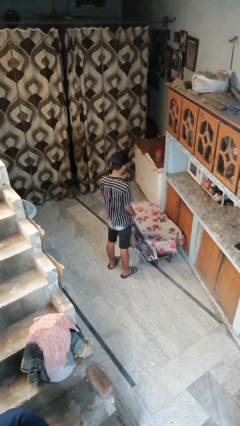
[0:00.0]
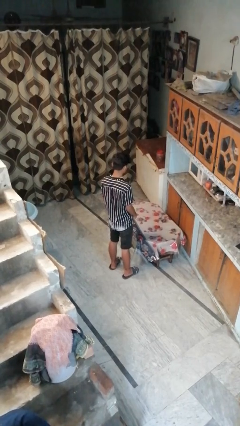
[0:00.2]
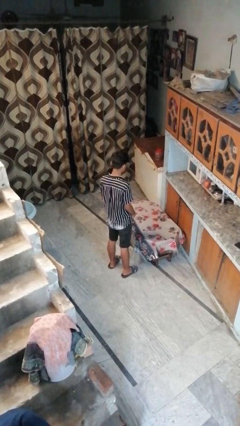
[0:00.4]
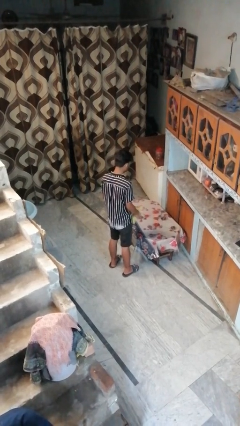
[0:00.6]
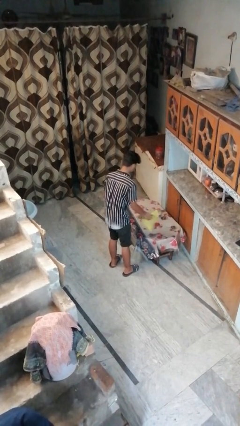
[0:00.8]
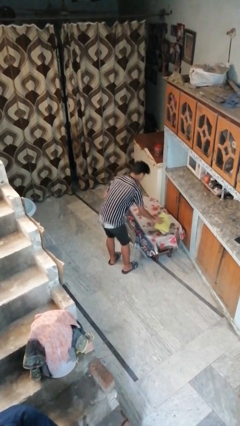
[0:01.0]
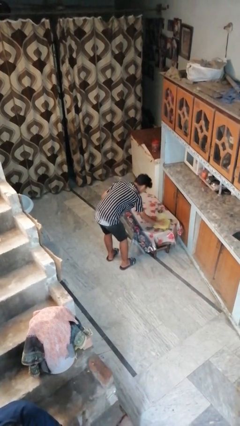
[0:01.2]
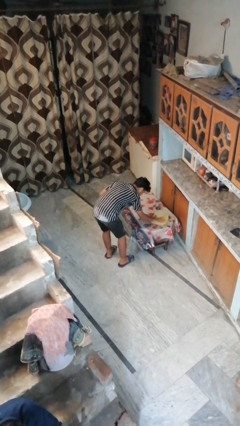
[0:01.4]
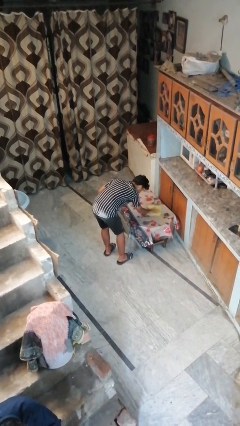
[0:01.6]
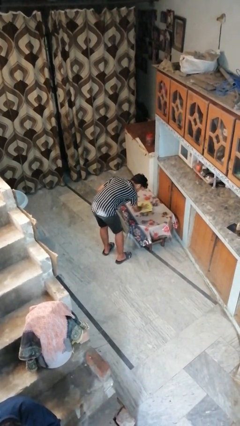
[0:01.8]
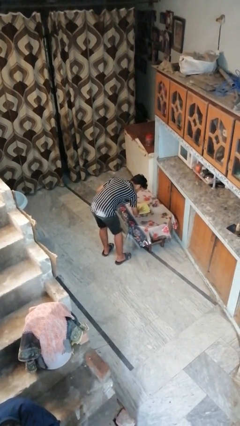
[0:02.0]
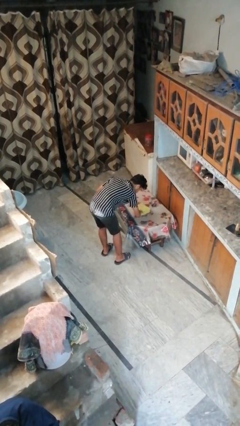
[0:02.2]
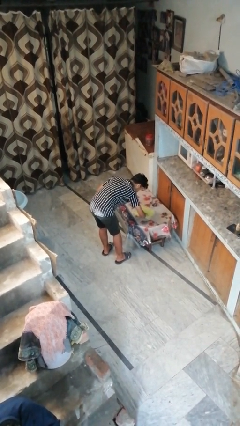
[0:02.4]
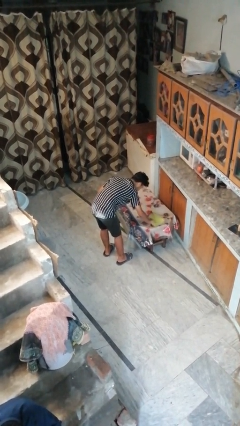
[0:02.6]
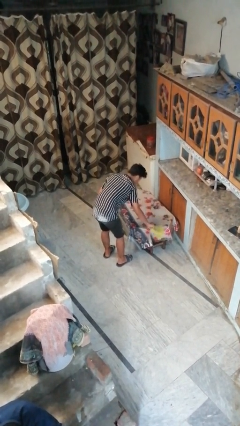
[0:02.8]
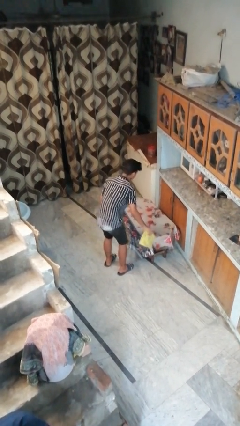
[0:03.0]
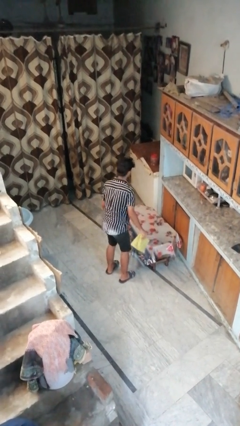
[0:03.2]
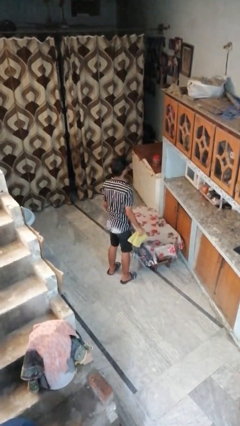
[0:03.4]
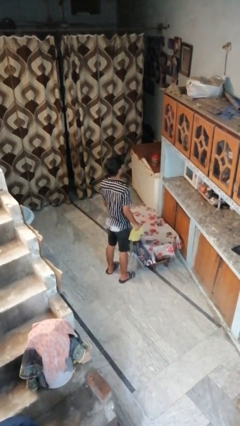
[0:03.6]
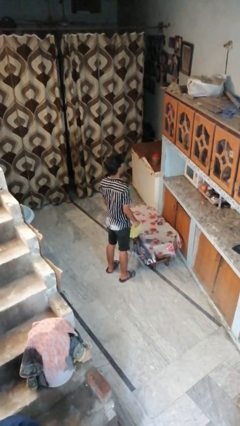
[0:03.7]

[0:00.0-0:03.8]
person cleans table with rag

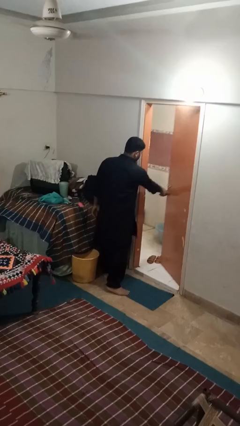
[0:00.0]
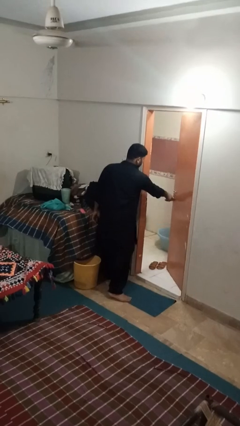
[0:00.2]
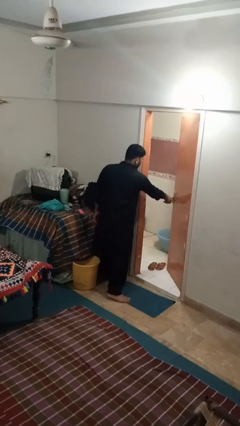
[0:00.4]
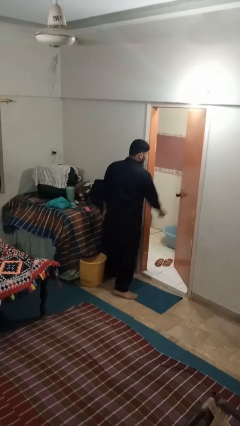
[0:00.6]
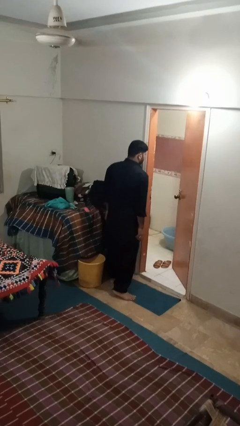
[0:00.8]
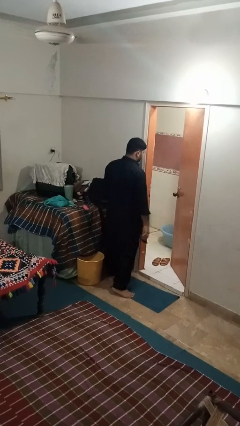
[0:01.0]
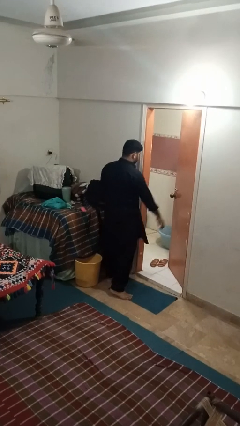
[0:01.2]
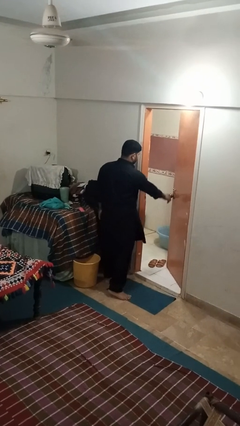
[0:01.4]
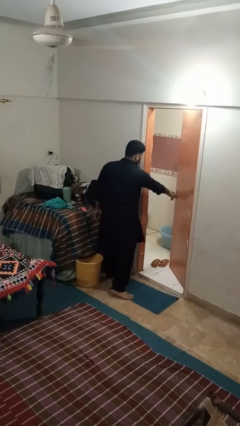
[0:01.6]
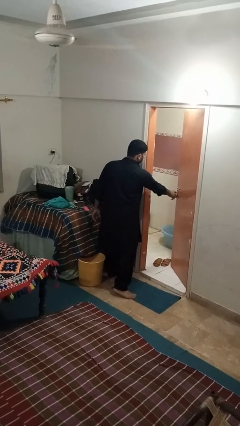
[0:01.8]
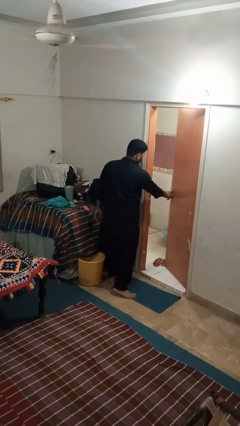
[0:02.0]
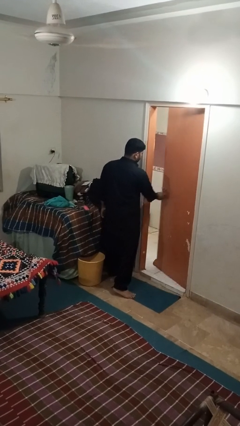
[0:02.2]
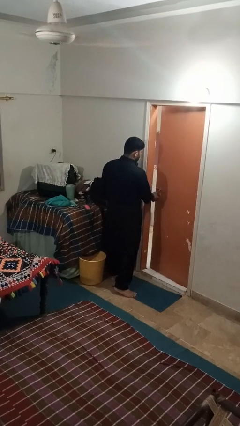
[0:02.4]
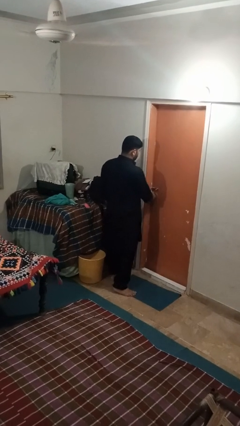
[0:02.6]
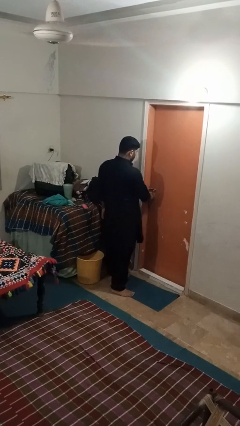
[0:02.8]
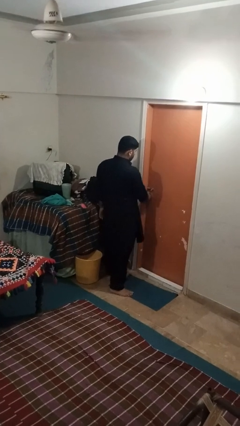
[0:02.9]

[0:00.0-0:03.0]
person closes facility door

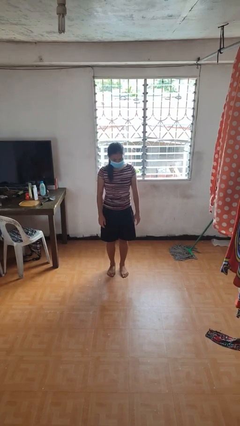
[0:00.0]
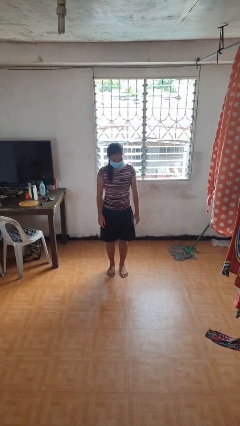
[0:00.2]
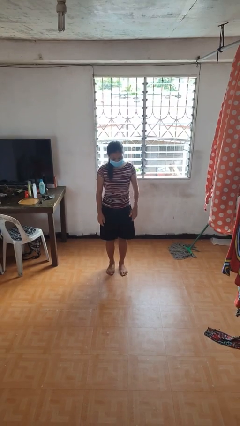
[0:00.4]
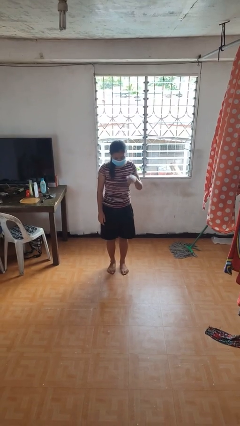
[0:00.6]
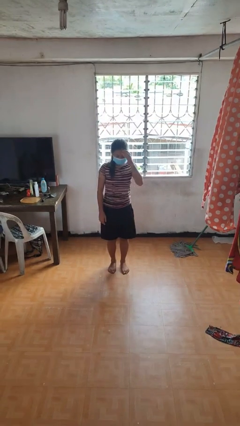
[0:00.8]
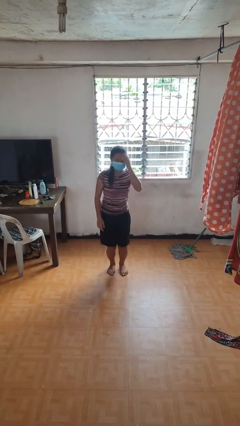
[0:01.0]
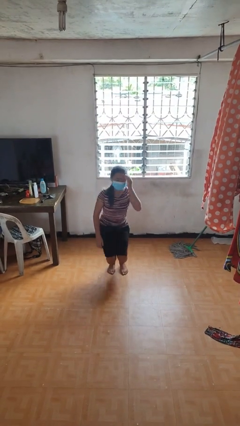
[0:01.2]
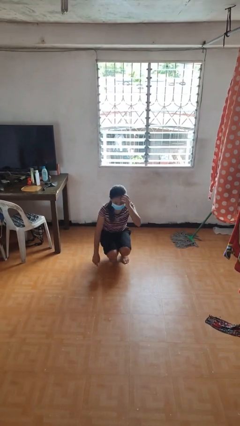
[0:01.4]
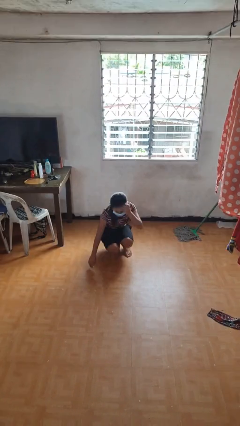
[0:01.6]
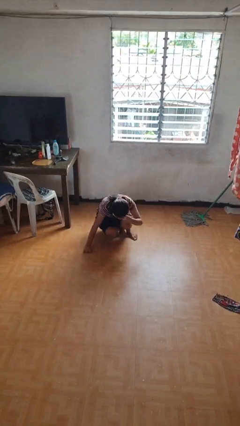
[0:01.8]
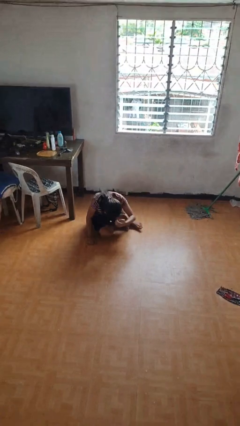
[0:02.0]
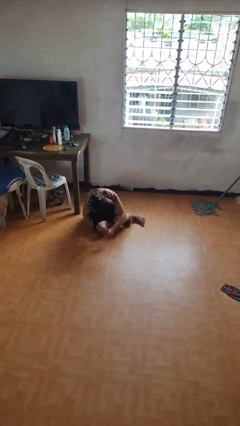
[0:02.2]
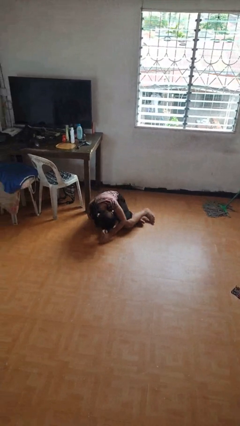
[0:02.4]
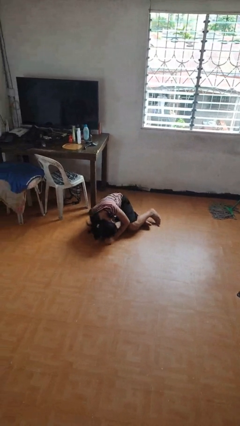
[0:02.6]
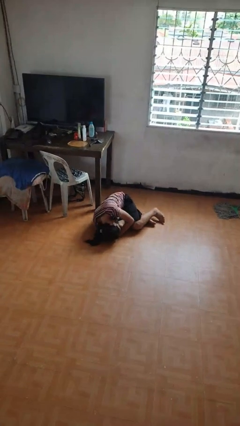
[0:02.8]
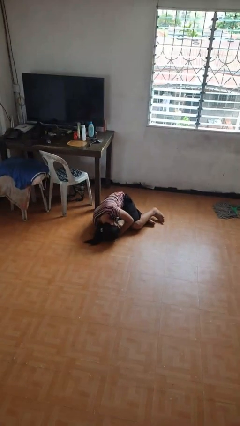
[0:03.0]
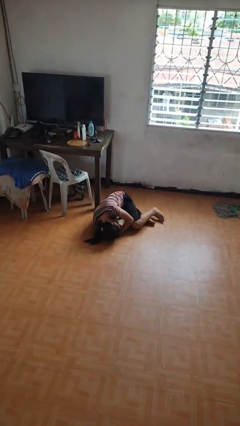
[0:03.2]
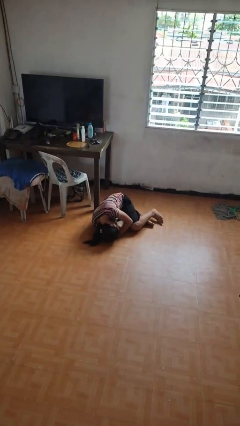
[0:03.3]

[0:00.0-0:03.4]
person falls while standing

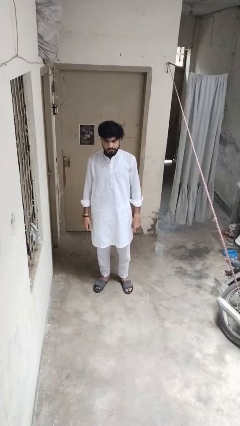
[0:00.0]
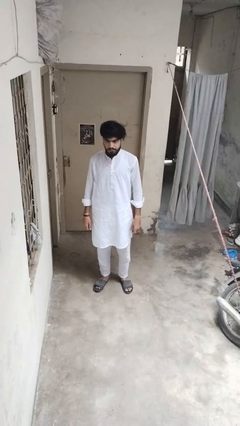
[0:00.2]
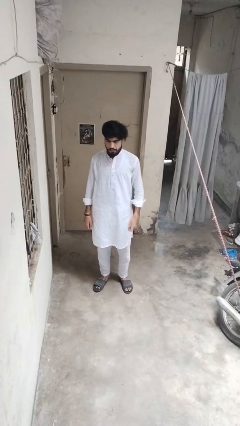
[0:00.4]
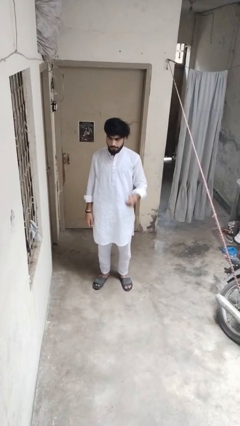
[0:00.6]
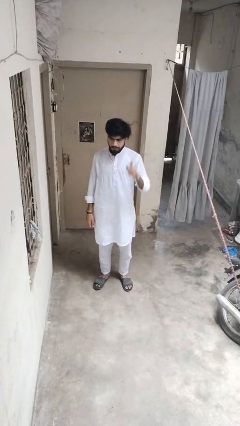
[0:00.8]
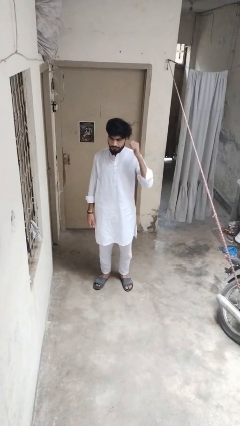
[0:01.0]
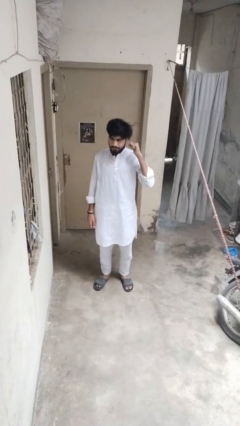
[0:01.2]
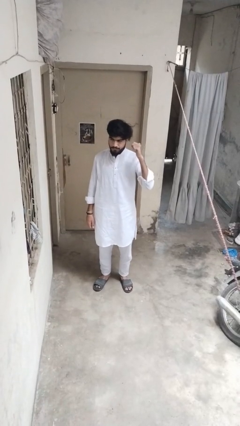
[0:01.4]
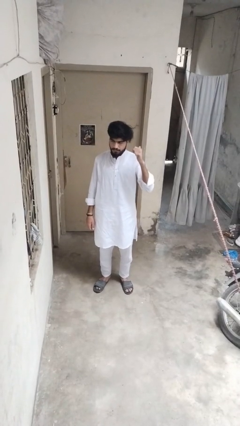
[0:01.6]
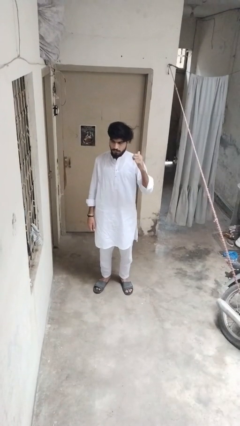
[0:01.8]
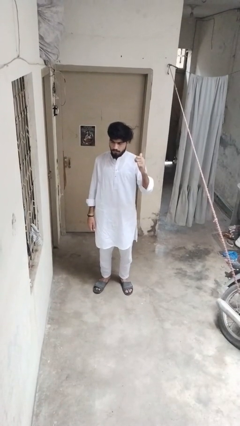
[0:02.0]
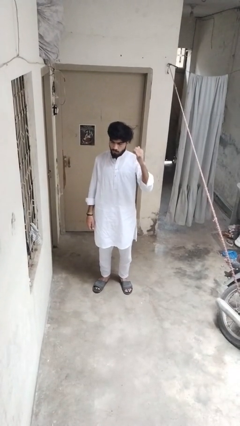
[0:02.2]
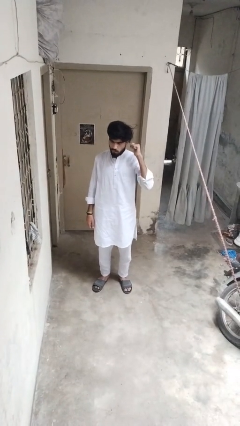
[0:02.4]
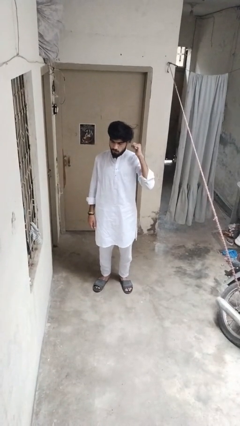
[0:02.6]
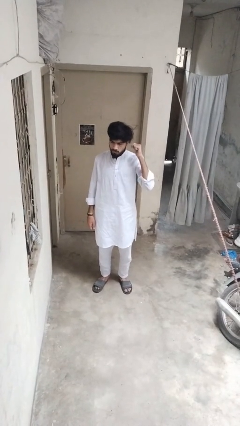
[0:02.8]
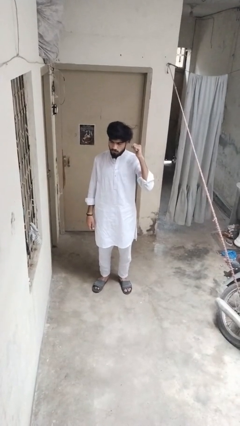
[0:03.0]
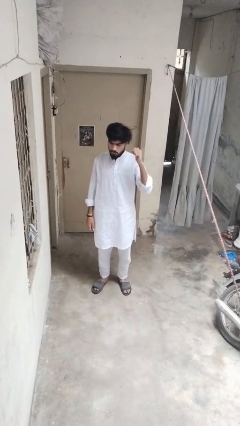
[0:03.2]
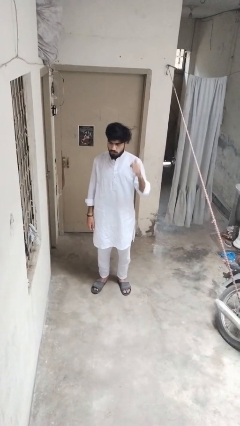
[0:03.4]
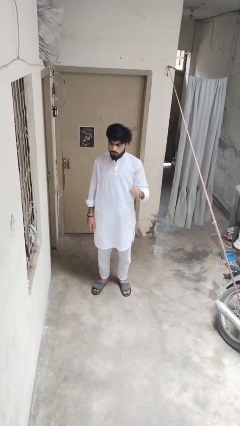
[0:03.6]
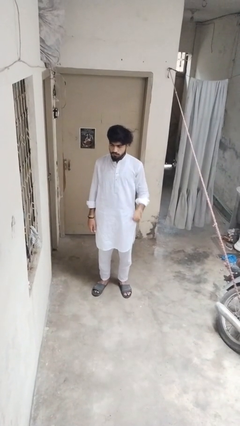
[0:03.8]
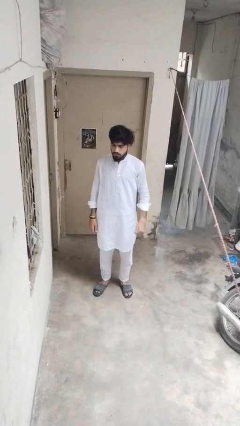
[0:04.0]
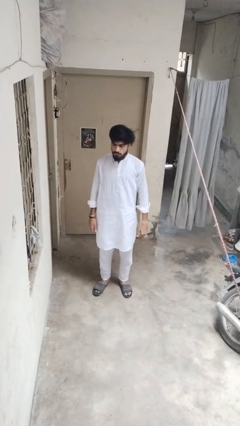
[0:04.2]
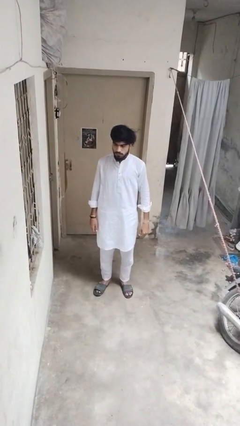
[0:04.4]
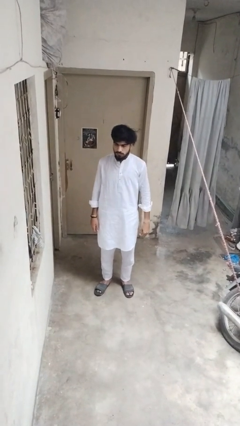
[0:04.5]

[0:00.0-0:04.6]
person gestures behind me

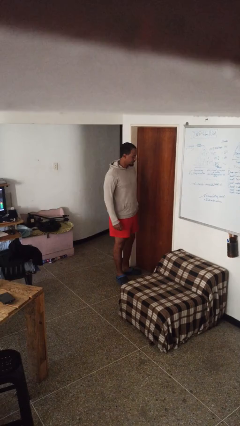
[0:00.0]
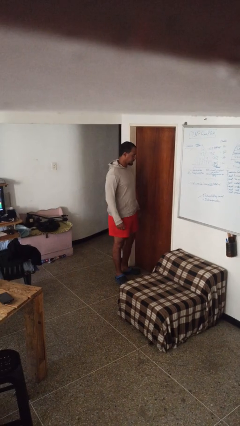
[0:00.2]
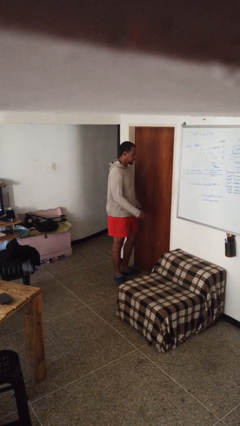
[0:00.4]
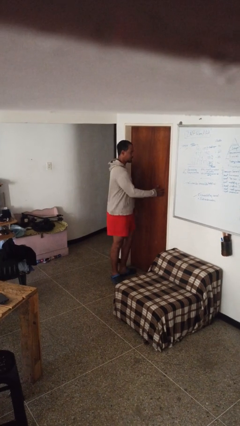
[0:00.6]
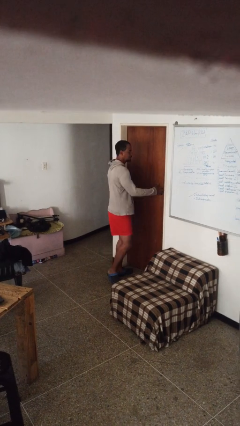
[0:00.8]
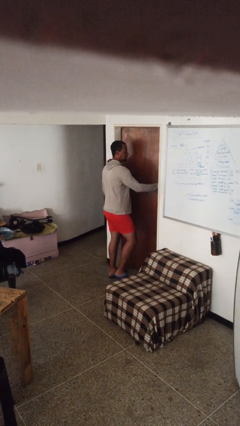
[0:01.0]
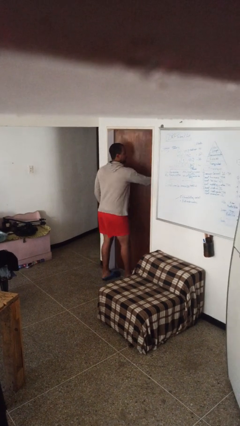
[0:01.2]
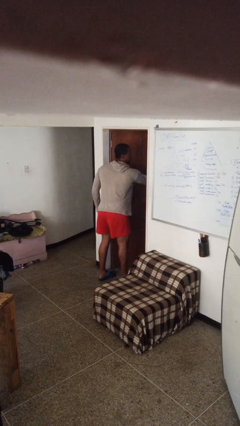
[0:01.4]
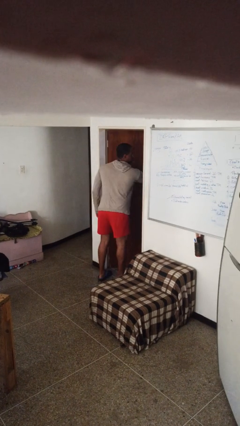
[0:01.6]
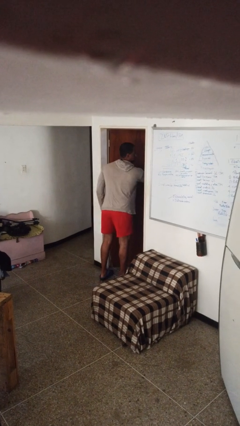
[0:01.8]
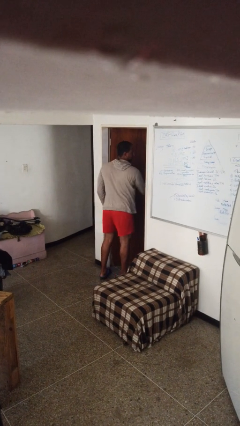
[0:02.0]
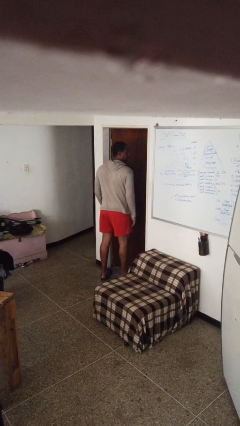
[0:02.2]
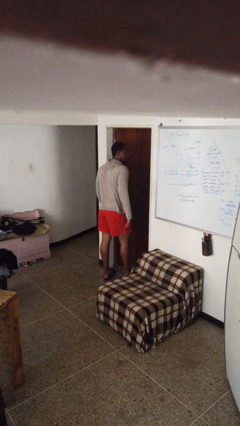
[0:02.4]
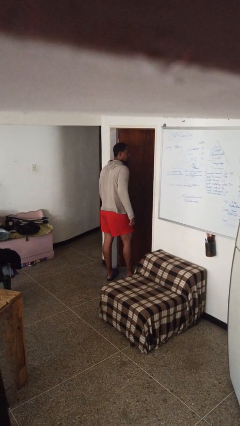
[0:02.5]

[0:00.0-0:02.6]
person opens facility door

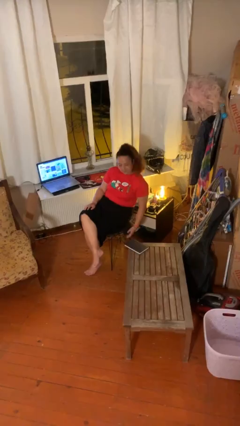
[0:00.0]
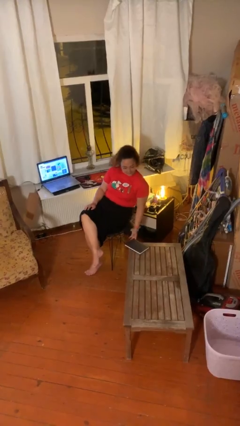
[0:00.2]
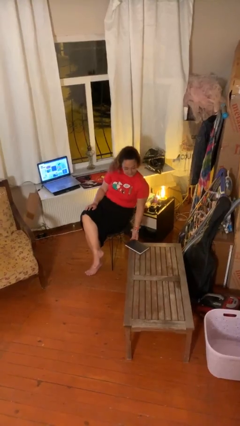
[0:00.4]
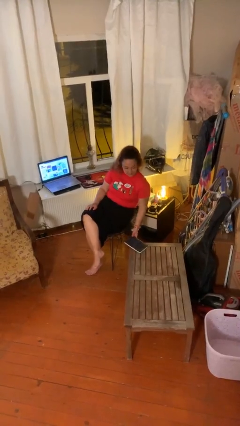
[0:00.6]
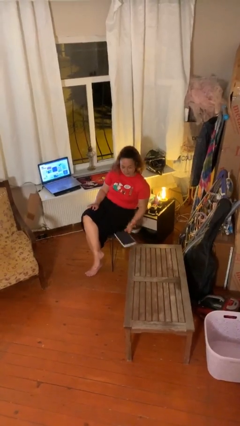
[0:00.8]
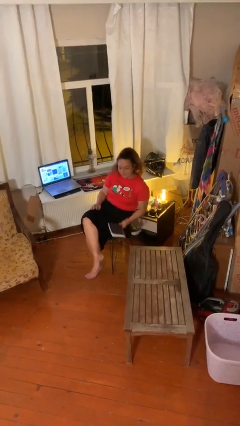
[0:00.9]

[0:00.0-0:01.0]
person picks up object from table
